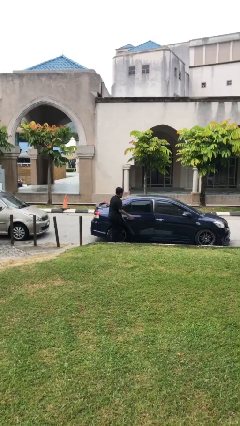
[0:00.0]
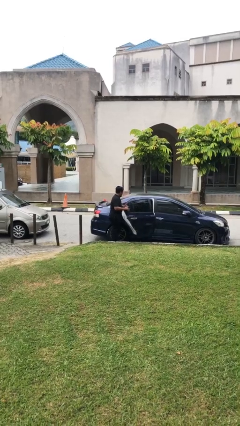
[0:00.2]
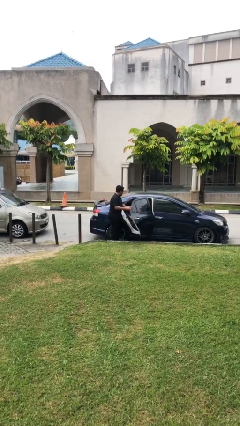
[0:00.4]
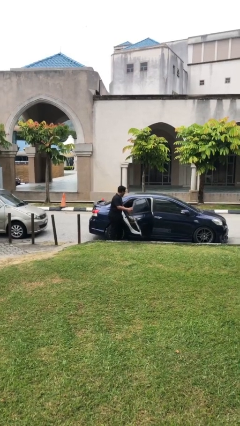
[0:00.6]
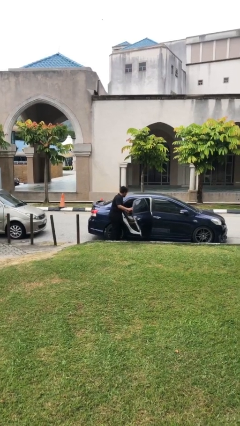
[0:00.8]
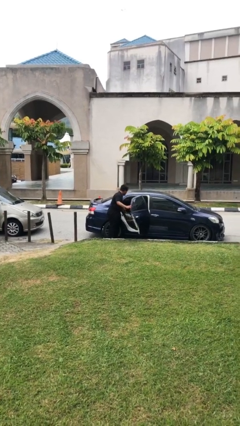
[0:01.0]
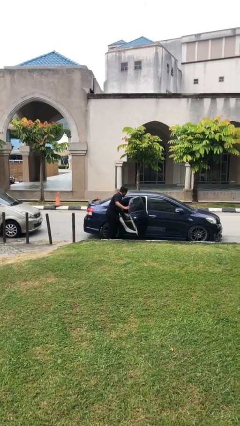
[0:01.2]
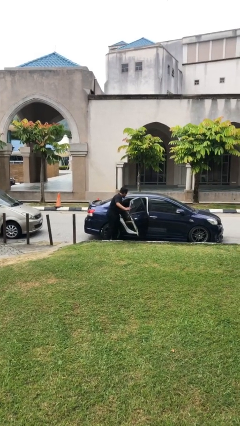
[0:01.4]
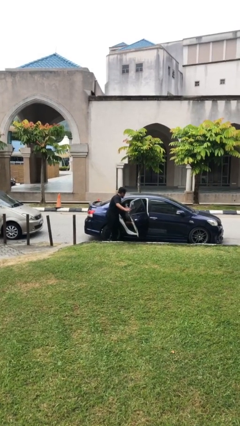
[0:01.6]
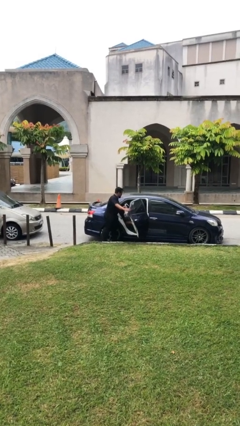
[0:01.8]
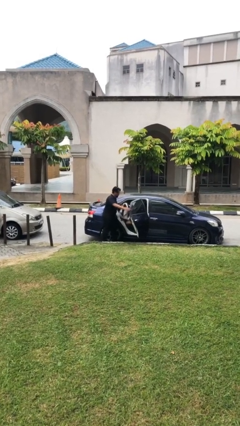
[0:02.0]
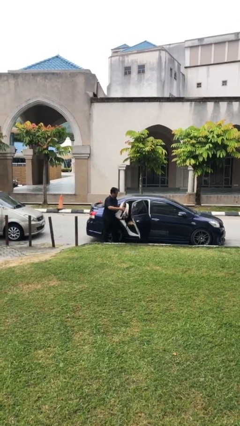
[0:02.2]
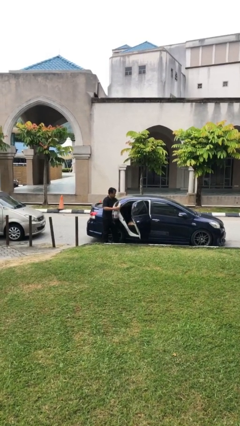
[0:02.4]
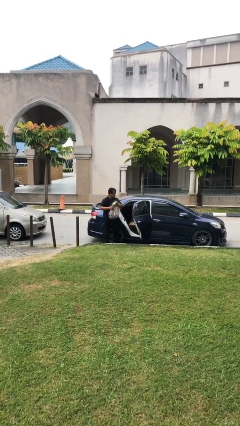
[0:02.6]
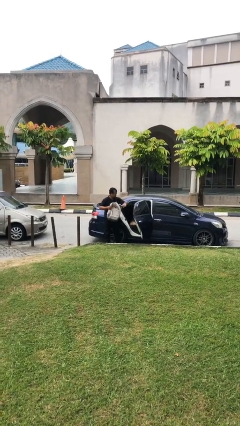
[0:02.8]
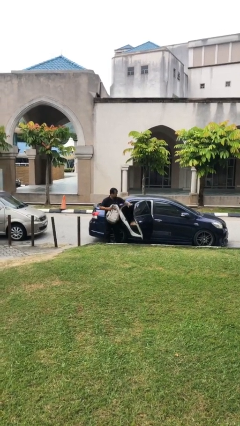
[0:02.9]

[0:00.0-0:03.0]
person unloads car

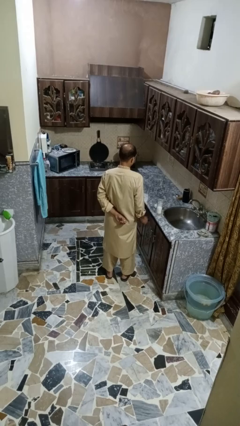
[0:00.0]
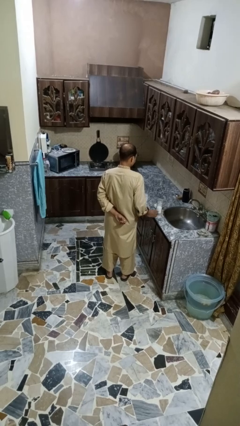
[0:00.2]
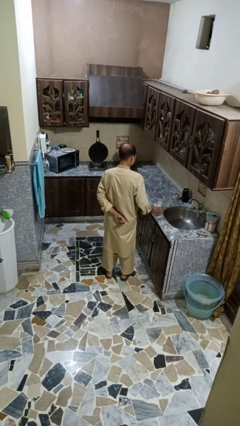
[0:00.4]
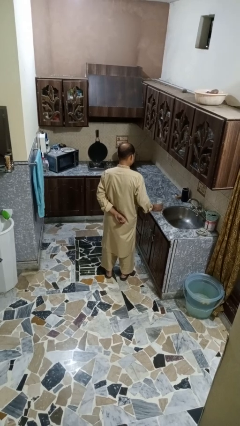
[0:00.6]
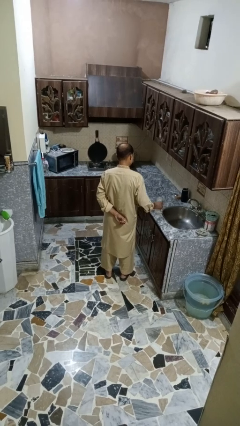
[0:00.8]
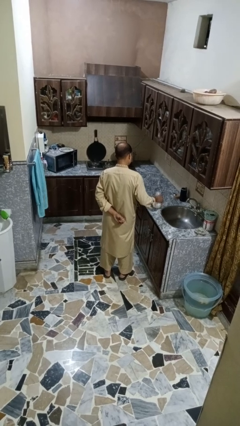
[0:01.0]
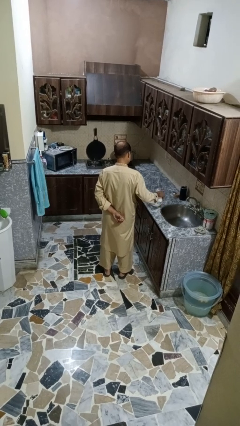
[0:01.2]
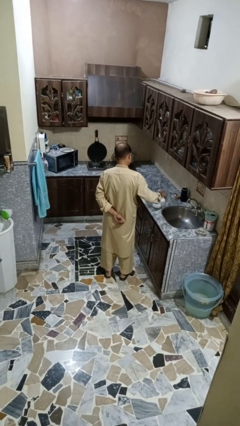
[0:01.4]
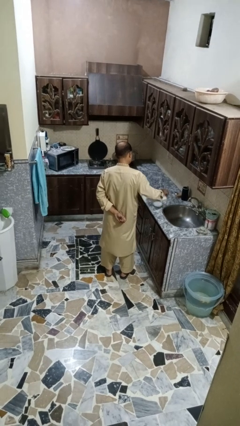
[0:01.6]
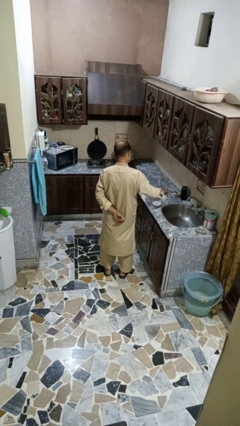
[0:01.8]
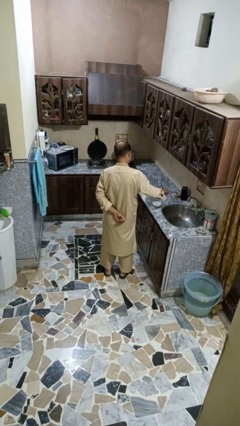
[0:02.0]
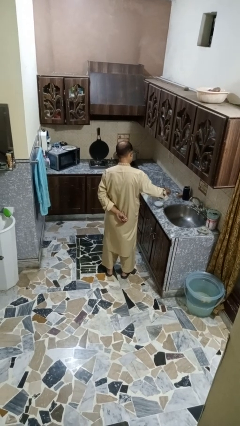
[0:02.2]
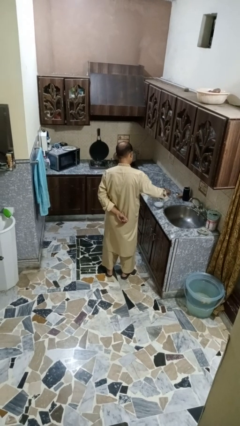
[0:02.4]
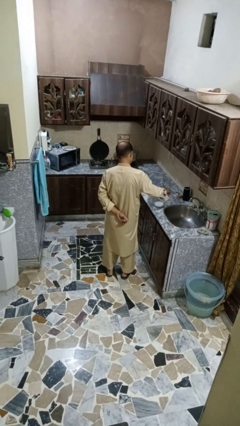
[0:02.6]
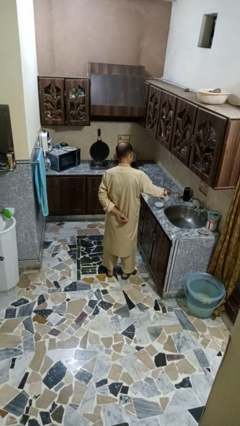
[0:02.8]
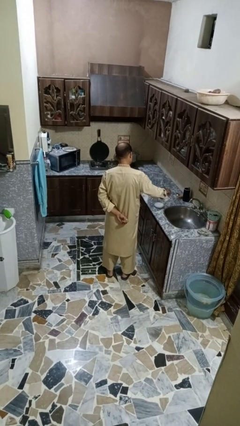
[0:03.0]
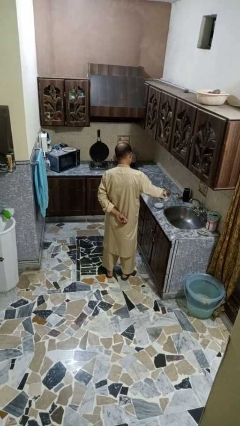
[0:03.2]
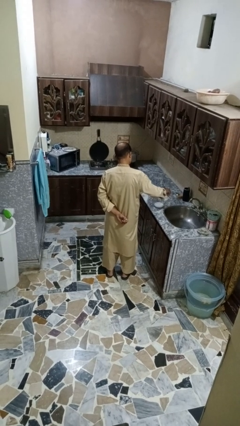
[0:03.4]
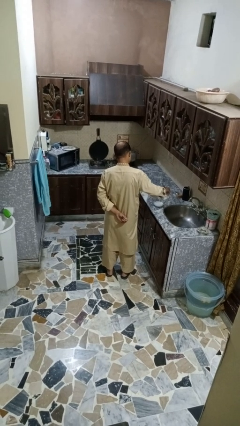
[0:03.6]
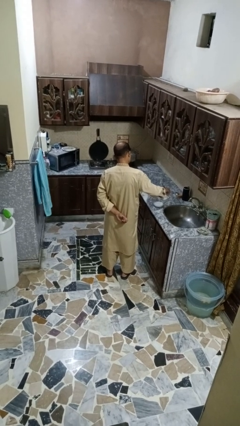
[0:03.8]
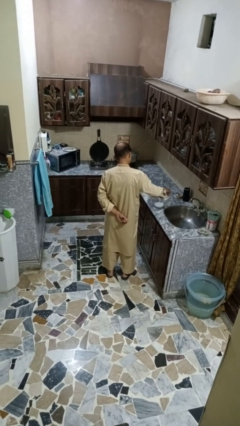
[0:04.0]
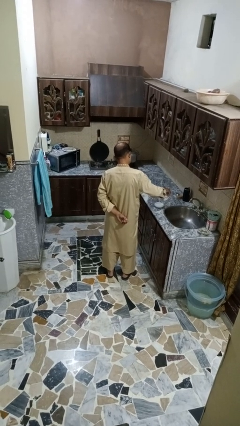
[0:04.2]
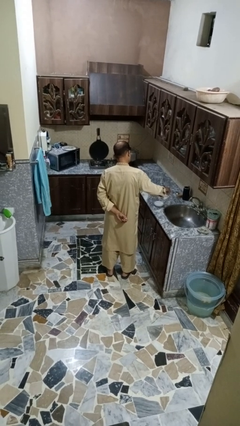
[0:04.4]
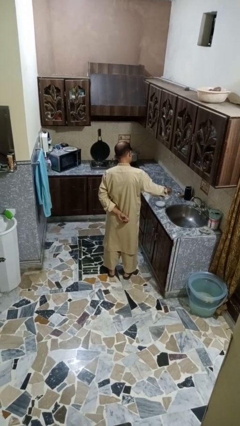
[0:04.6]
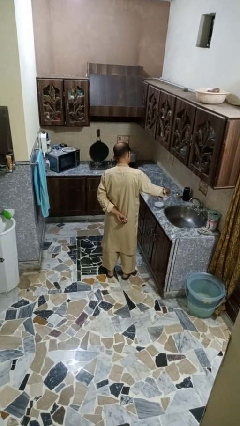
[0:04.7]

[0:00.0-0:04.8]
person pours into bowl

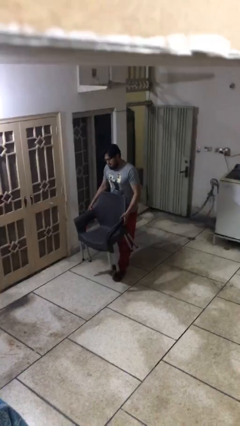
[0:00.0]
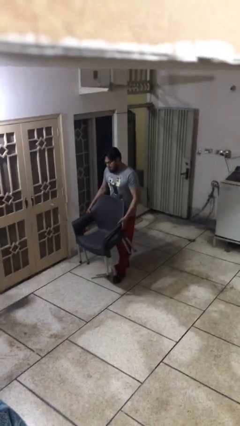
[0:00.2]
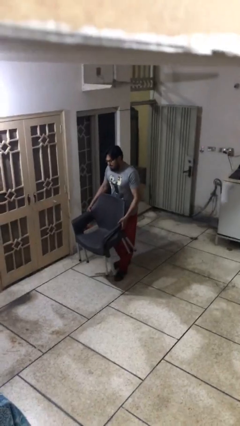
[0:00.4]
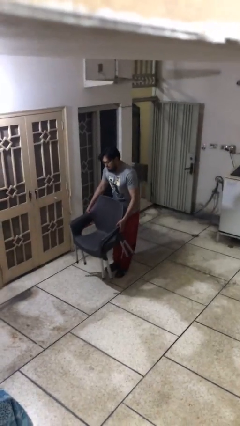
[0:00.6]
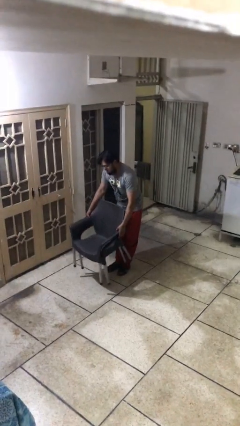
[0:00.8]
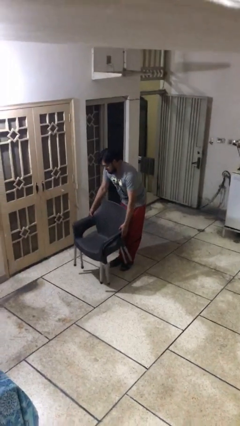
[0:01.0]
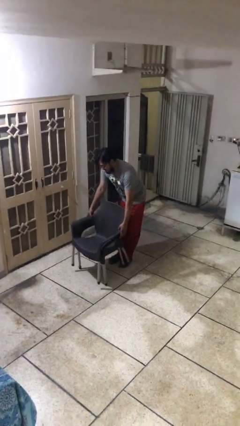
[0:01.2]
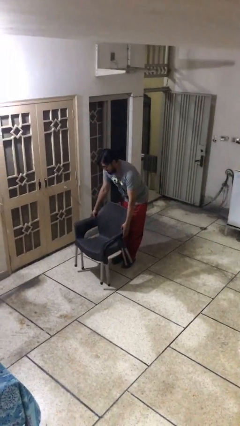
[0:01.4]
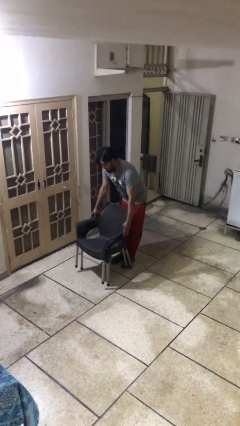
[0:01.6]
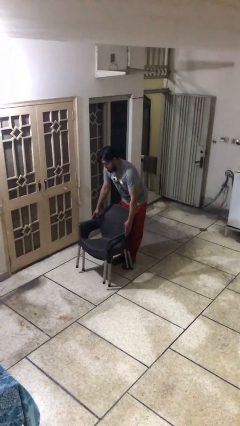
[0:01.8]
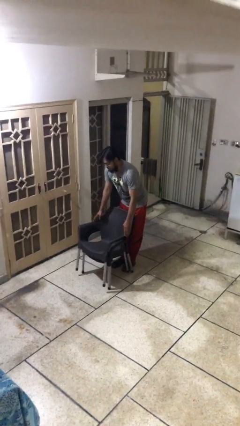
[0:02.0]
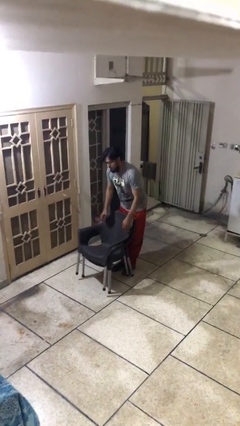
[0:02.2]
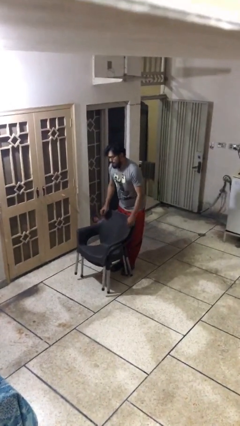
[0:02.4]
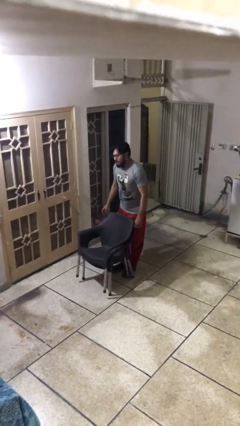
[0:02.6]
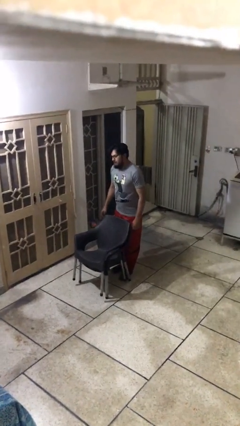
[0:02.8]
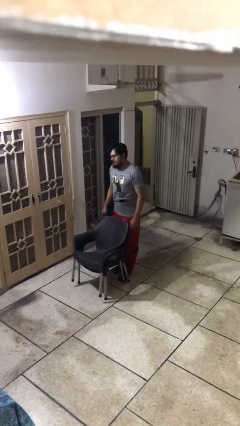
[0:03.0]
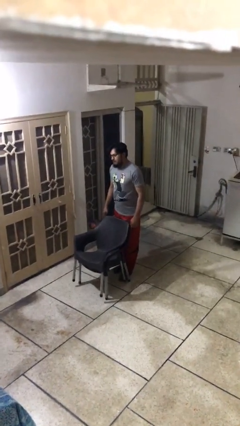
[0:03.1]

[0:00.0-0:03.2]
person puts down object on floor

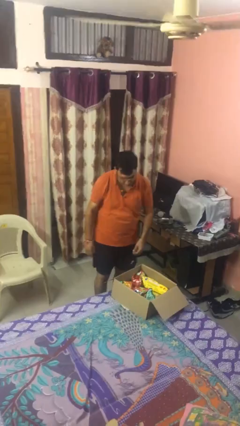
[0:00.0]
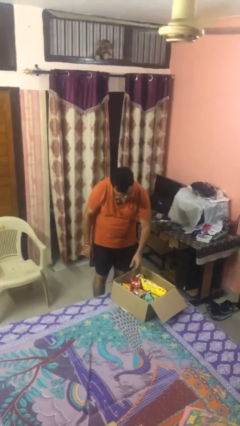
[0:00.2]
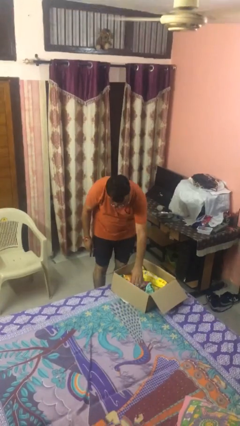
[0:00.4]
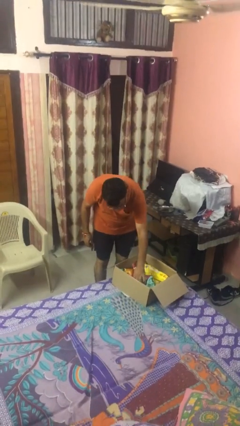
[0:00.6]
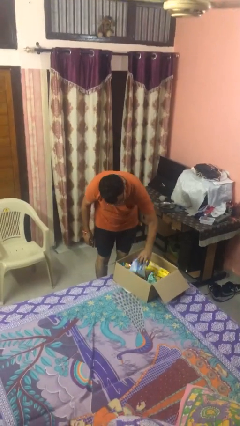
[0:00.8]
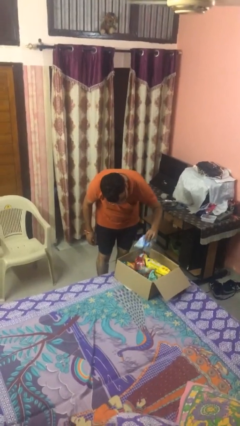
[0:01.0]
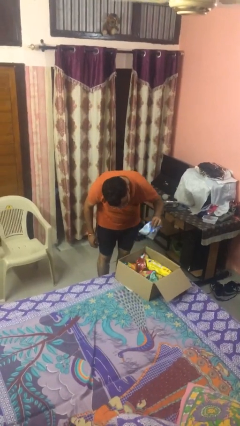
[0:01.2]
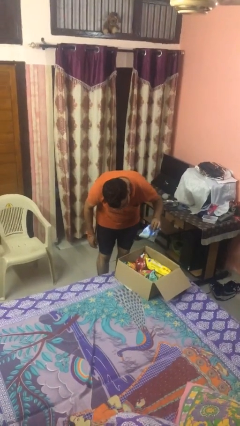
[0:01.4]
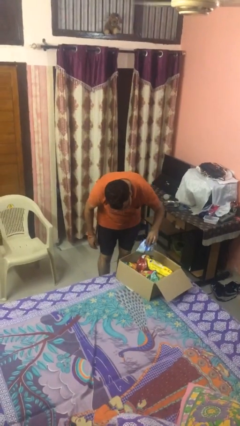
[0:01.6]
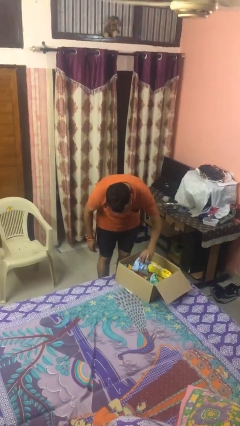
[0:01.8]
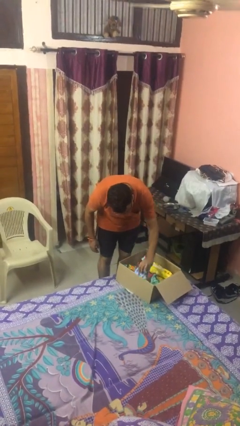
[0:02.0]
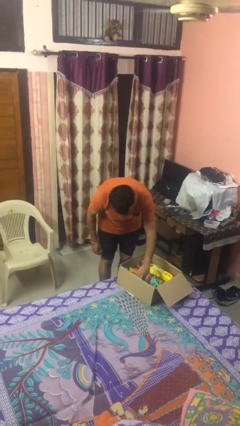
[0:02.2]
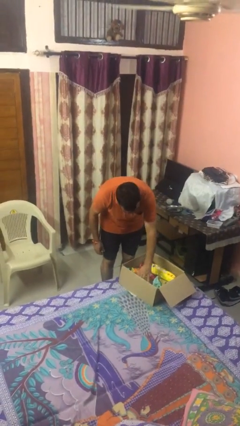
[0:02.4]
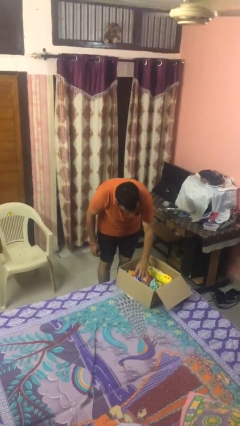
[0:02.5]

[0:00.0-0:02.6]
person searches in box

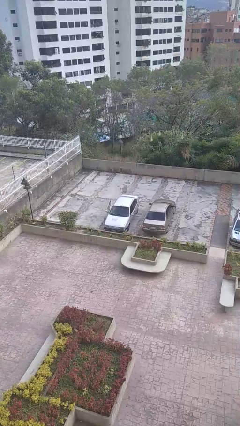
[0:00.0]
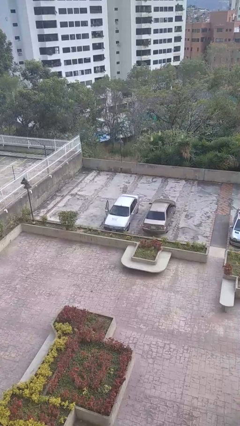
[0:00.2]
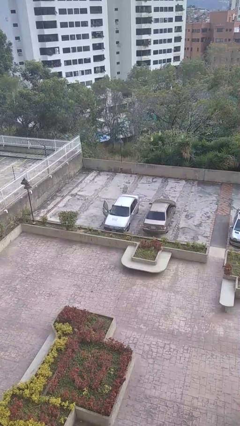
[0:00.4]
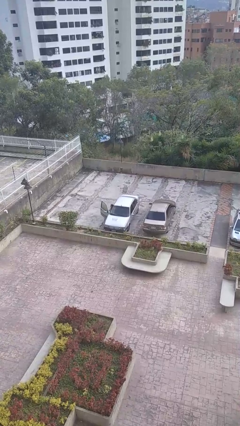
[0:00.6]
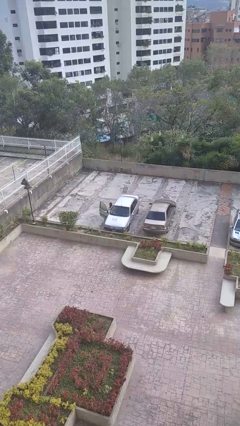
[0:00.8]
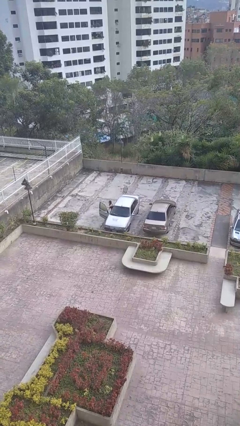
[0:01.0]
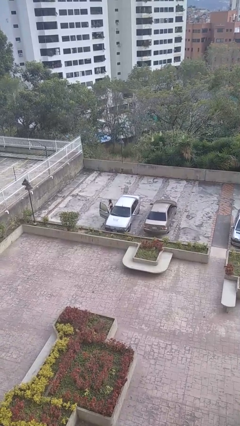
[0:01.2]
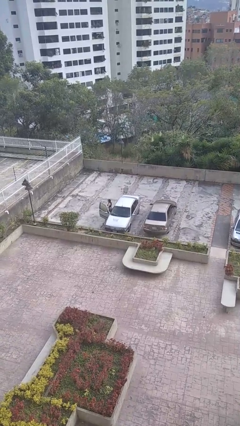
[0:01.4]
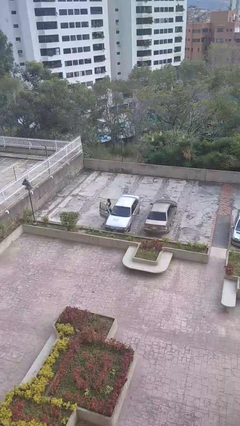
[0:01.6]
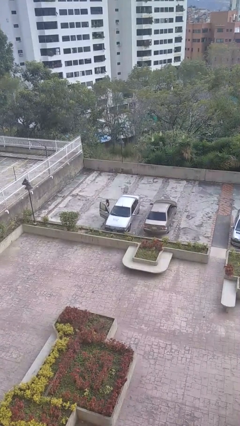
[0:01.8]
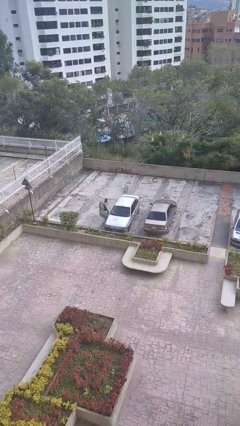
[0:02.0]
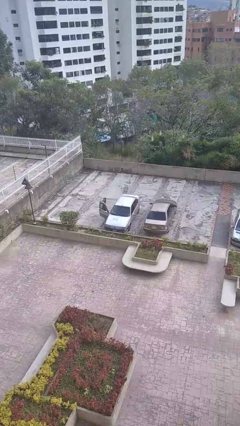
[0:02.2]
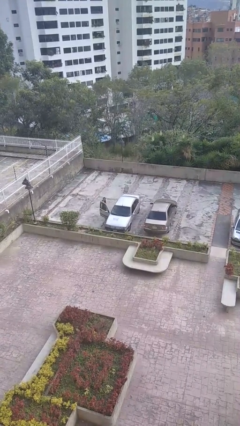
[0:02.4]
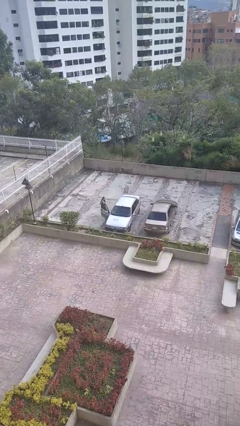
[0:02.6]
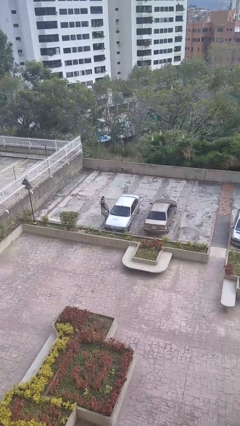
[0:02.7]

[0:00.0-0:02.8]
car drops off person

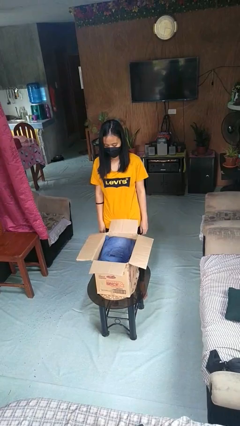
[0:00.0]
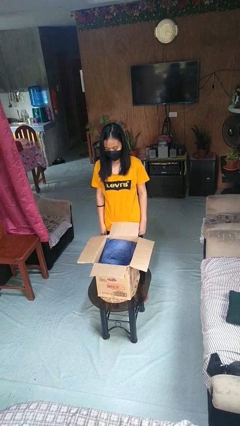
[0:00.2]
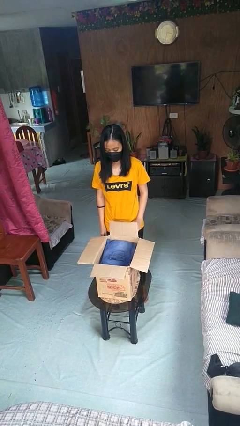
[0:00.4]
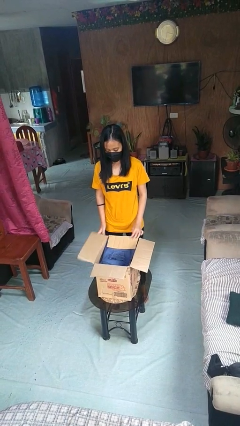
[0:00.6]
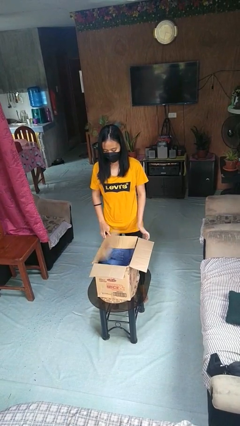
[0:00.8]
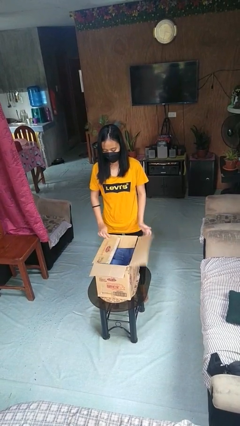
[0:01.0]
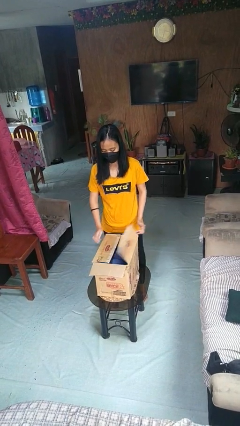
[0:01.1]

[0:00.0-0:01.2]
person closes box

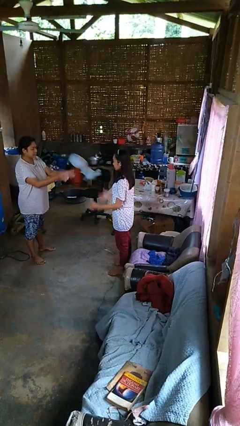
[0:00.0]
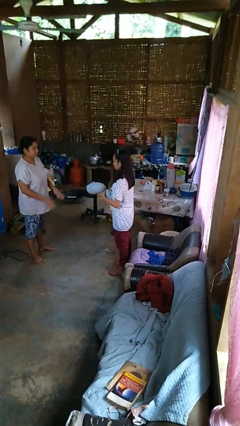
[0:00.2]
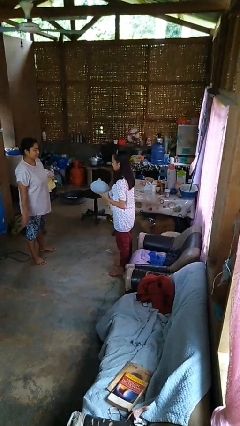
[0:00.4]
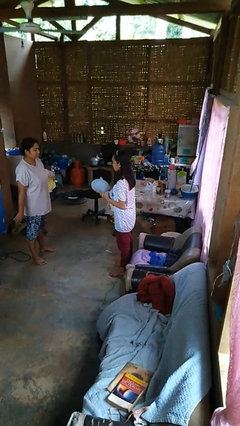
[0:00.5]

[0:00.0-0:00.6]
person catches object from person
